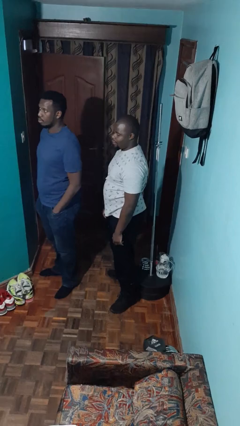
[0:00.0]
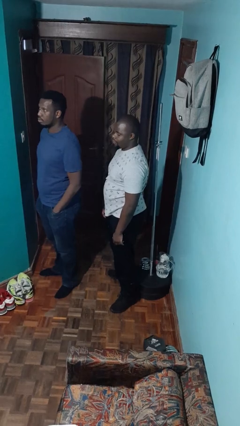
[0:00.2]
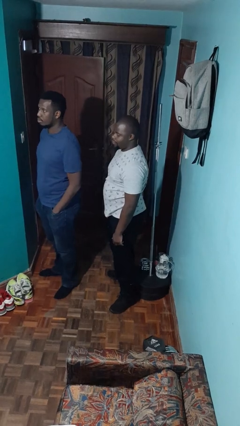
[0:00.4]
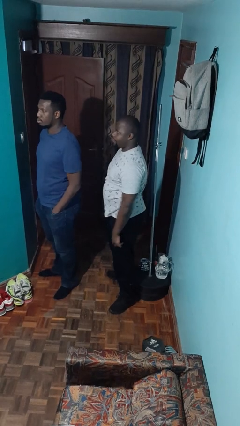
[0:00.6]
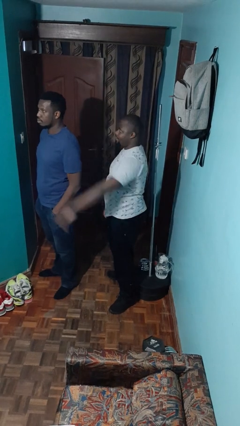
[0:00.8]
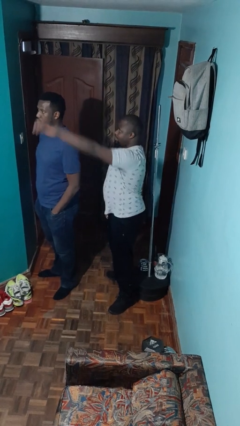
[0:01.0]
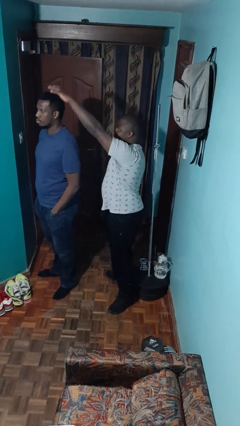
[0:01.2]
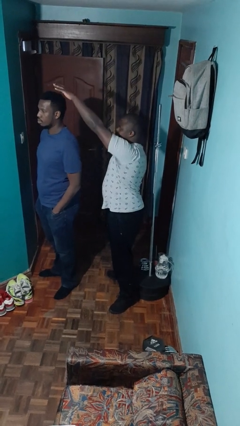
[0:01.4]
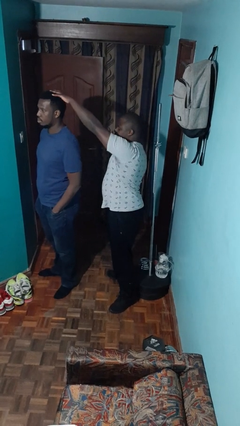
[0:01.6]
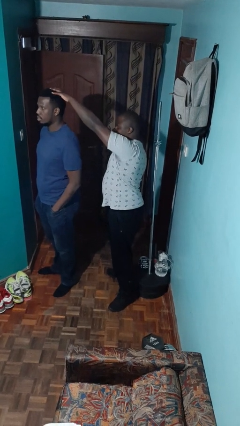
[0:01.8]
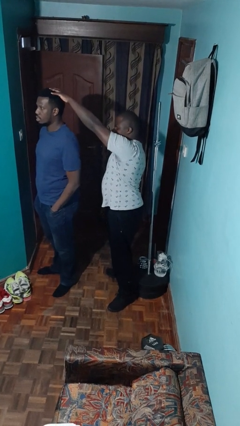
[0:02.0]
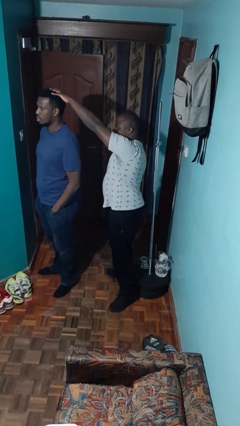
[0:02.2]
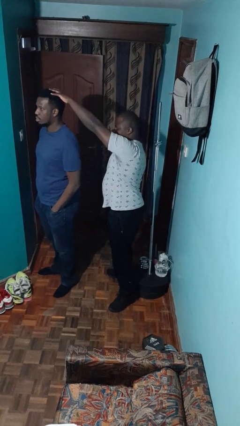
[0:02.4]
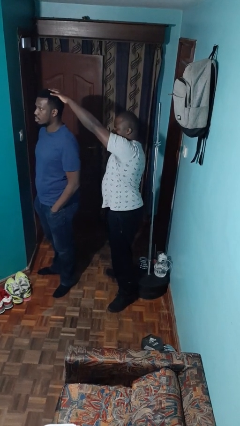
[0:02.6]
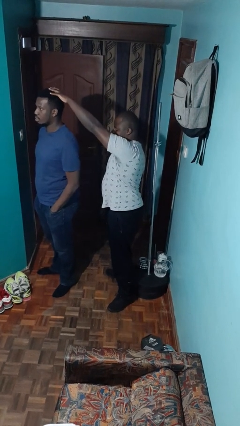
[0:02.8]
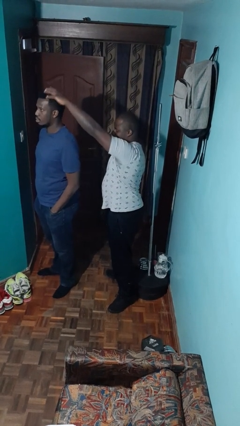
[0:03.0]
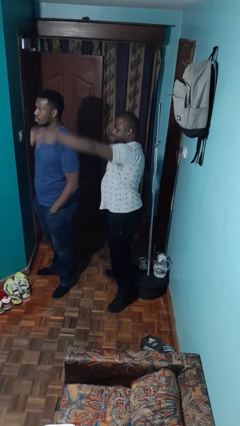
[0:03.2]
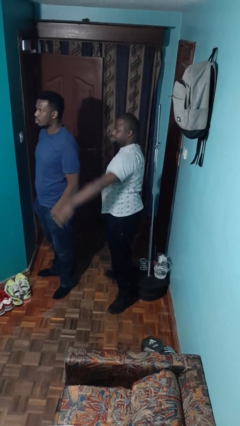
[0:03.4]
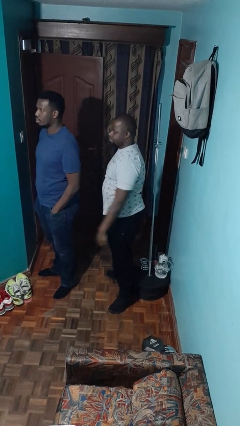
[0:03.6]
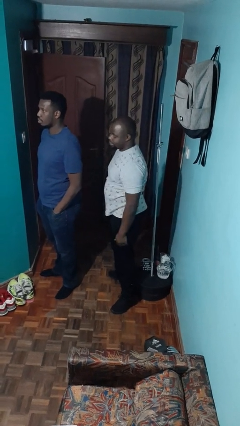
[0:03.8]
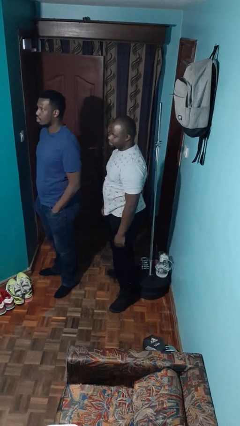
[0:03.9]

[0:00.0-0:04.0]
person grabs person by hair

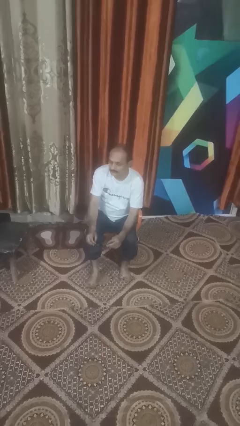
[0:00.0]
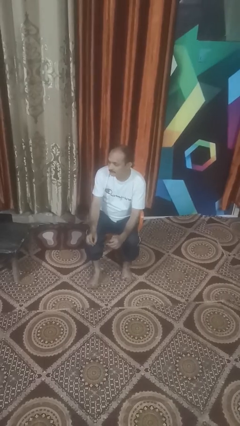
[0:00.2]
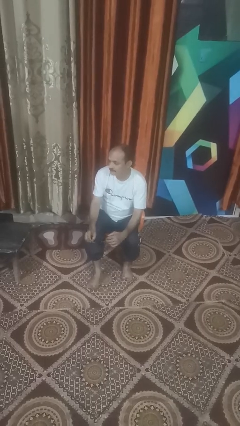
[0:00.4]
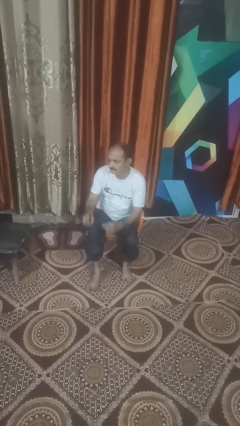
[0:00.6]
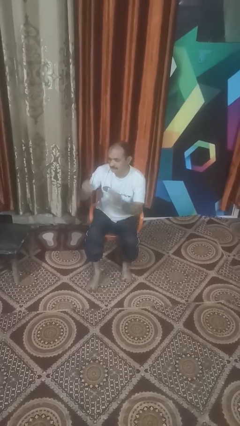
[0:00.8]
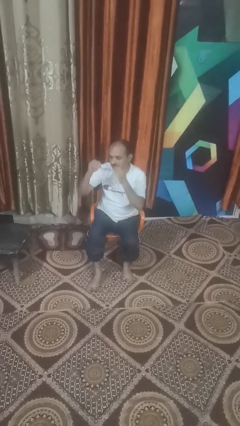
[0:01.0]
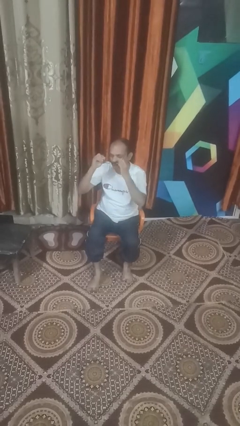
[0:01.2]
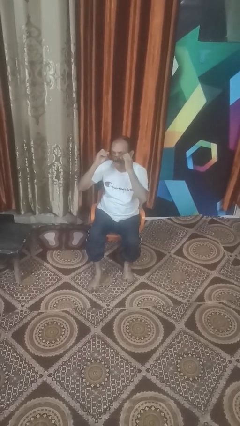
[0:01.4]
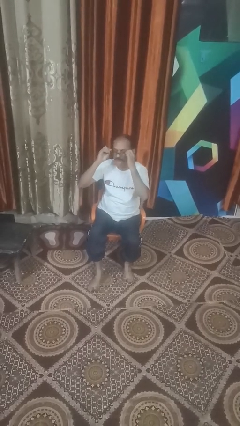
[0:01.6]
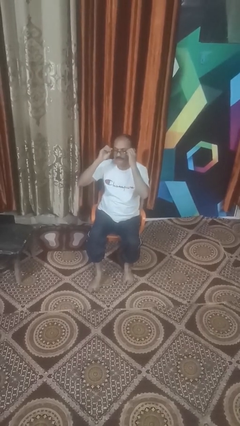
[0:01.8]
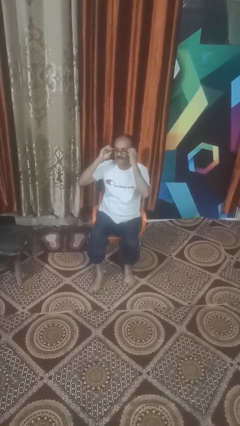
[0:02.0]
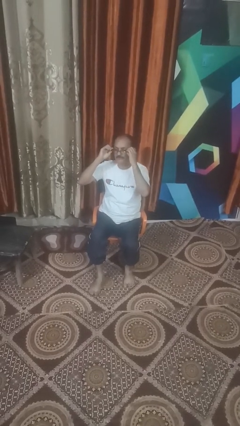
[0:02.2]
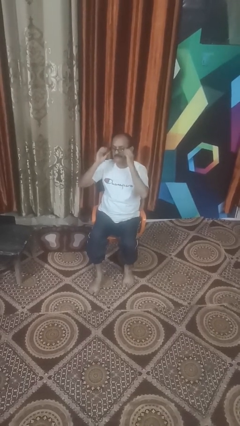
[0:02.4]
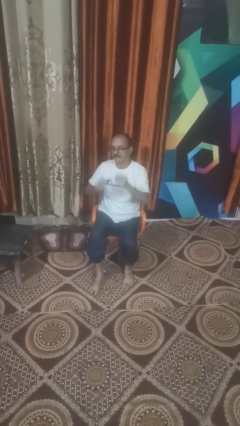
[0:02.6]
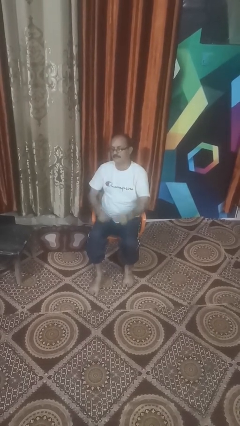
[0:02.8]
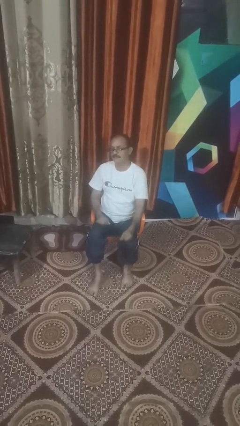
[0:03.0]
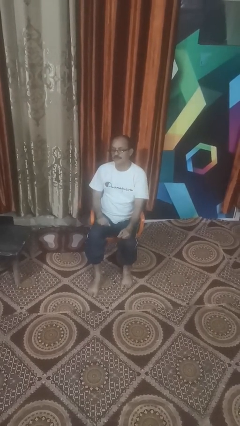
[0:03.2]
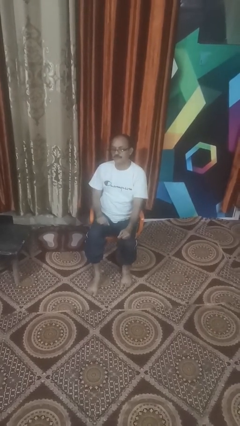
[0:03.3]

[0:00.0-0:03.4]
person puts on glasses

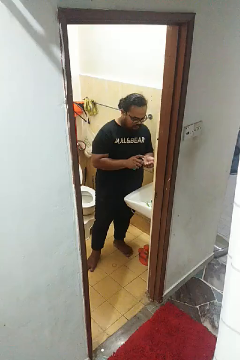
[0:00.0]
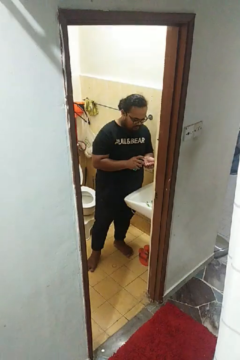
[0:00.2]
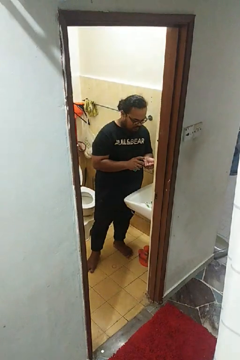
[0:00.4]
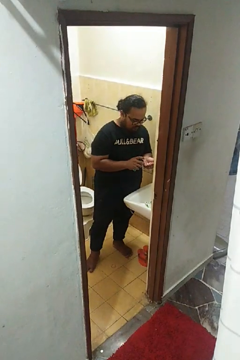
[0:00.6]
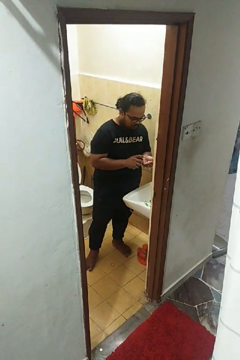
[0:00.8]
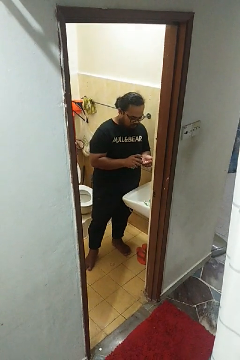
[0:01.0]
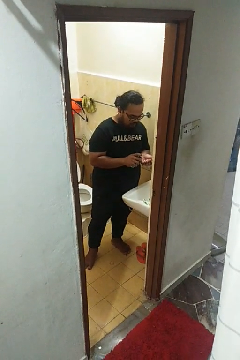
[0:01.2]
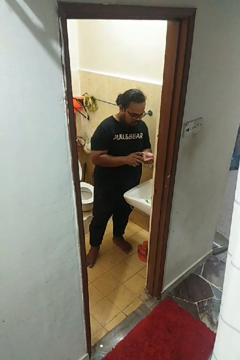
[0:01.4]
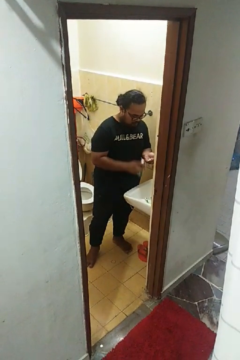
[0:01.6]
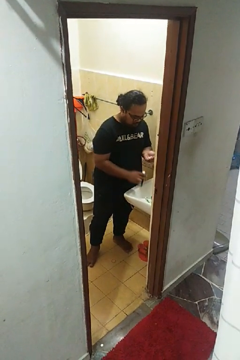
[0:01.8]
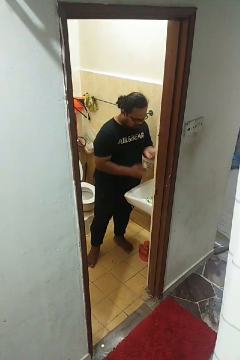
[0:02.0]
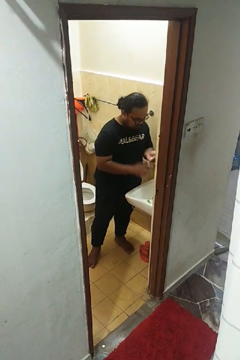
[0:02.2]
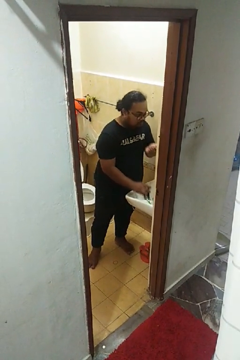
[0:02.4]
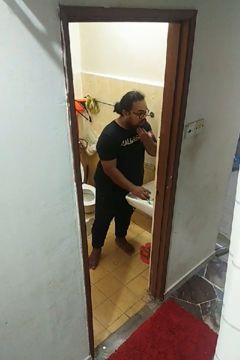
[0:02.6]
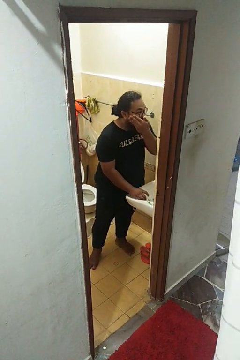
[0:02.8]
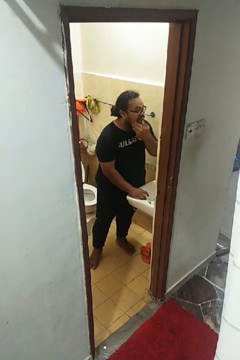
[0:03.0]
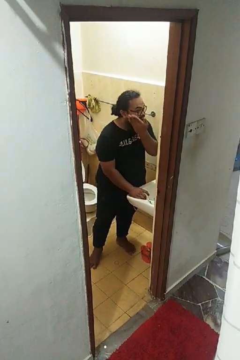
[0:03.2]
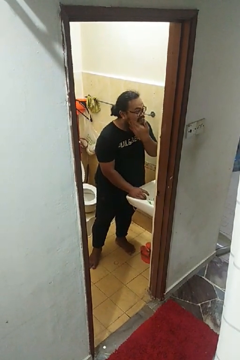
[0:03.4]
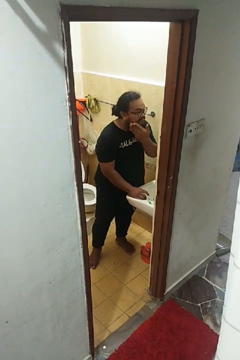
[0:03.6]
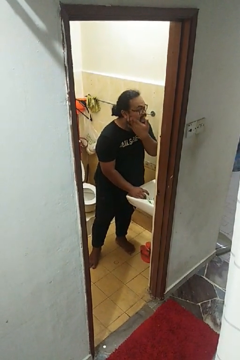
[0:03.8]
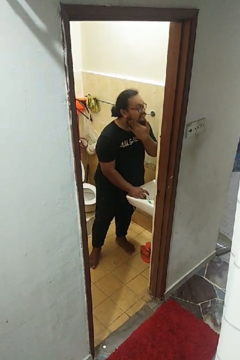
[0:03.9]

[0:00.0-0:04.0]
person applies shaving cream

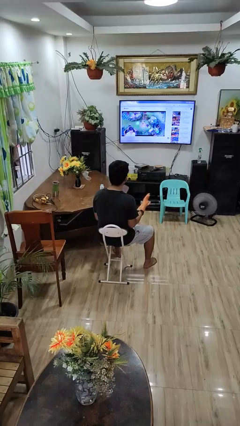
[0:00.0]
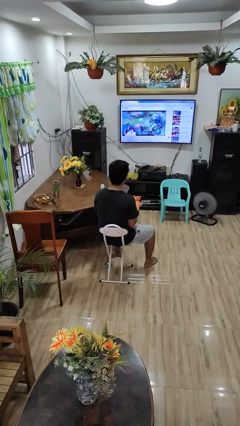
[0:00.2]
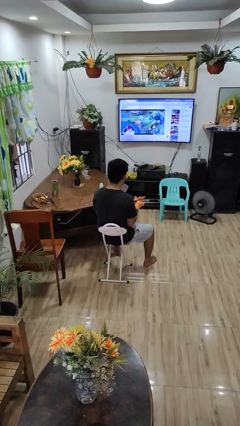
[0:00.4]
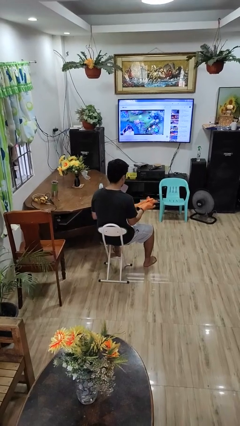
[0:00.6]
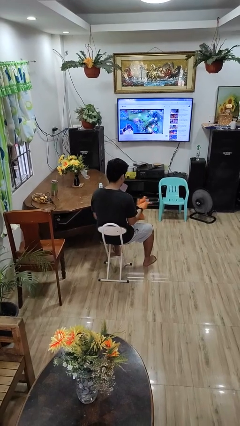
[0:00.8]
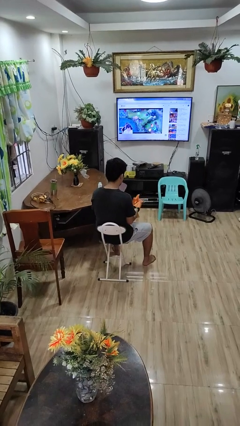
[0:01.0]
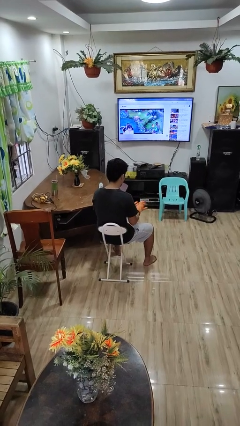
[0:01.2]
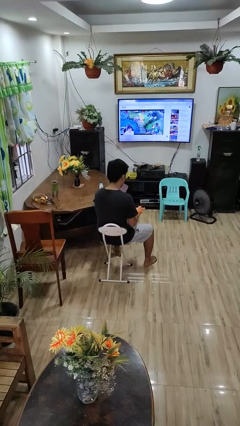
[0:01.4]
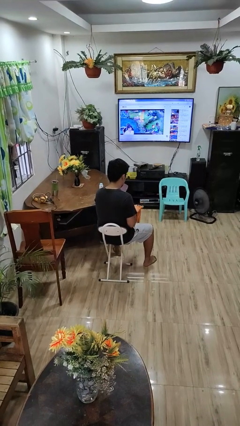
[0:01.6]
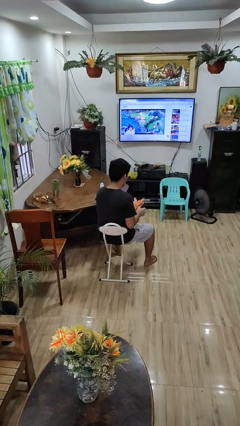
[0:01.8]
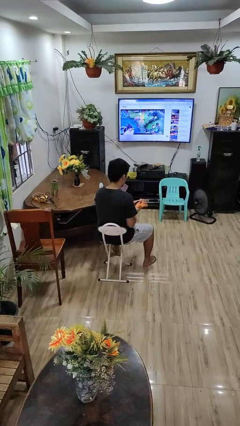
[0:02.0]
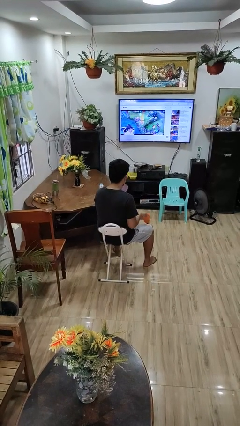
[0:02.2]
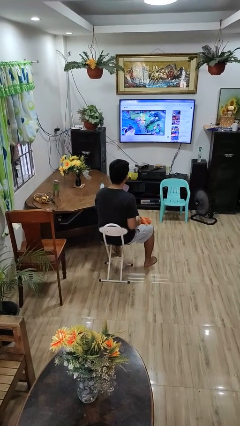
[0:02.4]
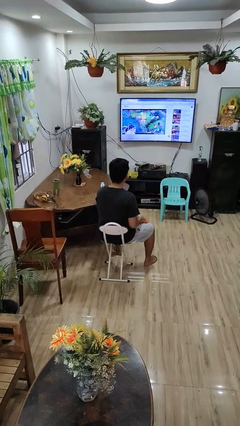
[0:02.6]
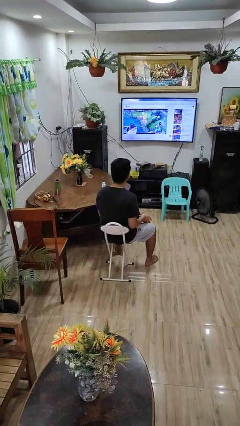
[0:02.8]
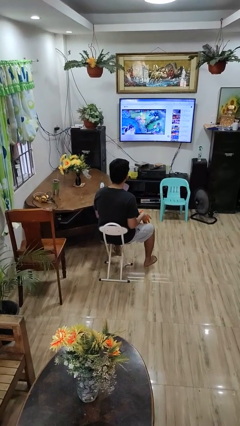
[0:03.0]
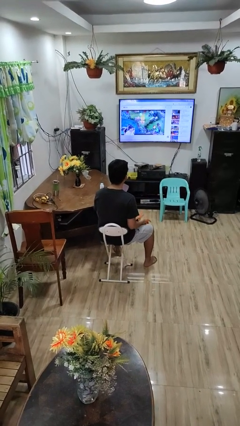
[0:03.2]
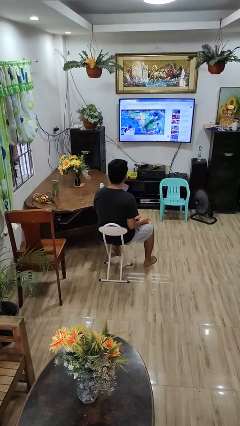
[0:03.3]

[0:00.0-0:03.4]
person takes off gloves

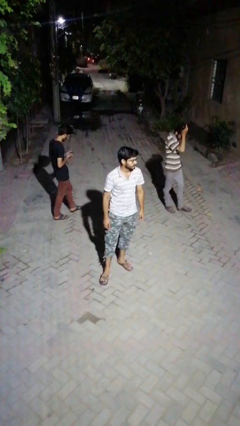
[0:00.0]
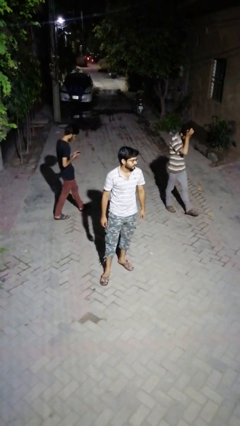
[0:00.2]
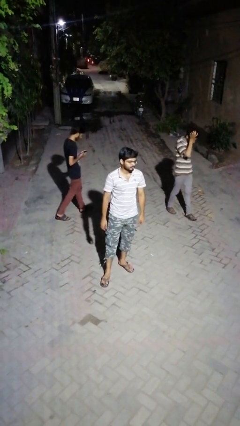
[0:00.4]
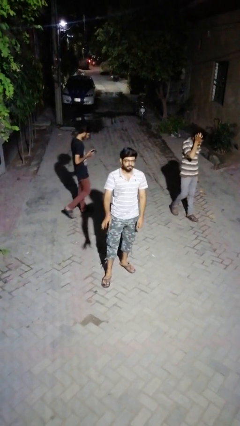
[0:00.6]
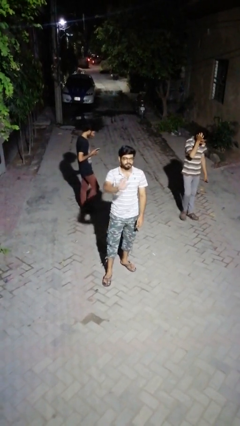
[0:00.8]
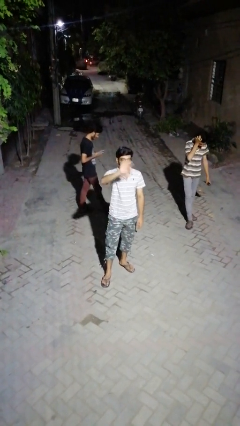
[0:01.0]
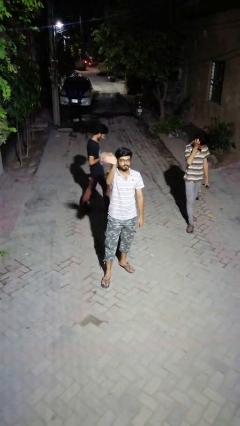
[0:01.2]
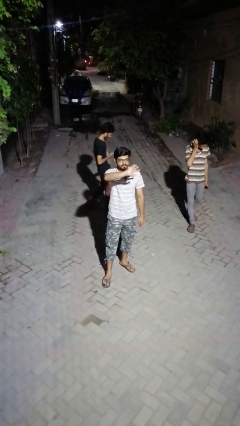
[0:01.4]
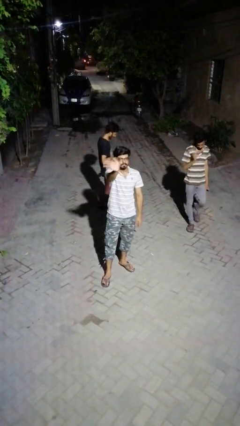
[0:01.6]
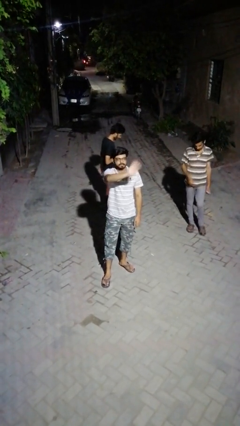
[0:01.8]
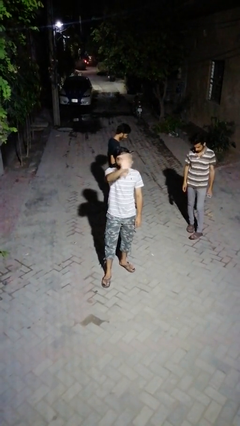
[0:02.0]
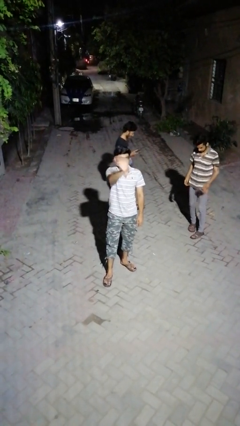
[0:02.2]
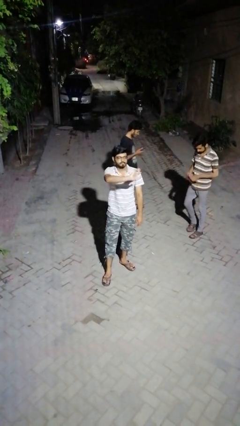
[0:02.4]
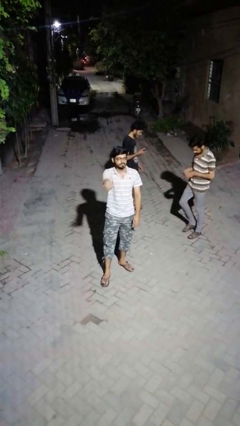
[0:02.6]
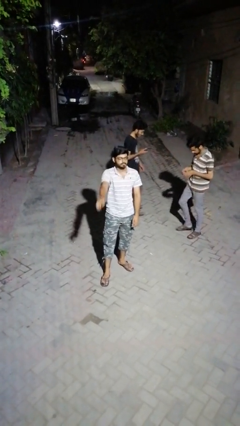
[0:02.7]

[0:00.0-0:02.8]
person waves at person

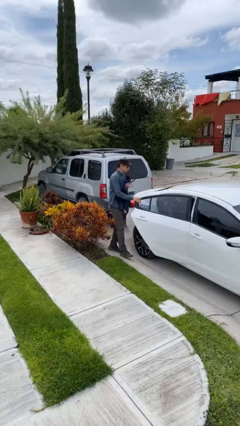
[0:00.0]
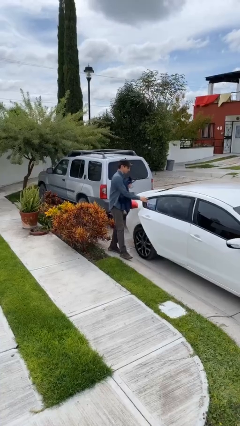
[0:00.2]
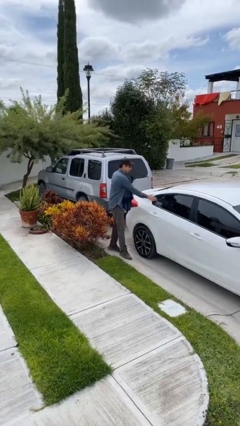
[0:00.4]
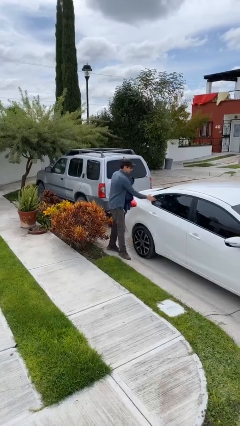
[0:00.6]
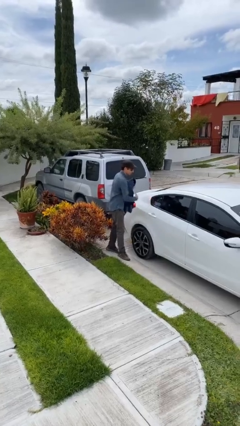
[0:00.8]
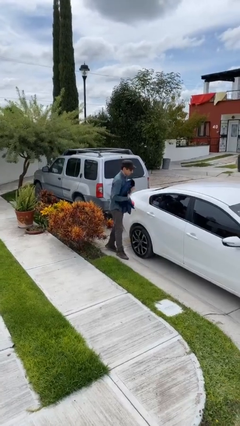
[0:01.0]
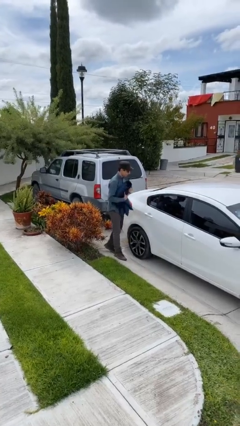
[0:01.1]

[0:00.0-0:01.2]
person closes car door
